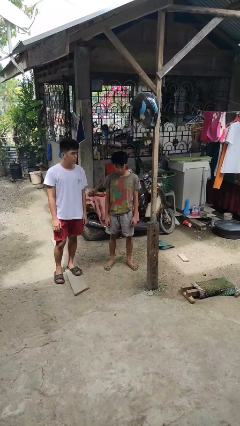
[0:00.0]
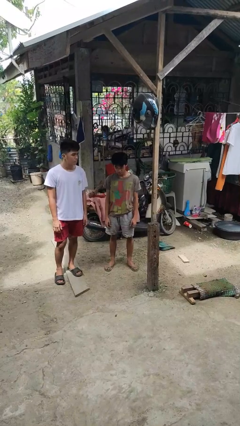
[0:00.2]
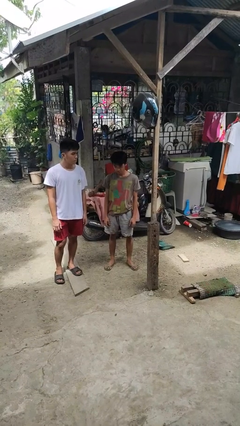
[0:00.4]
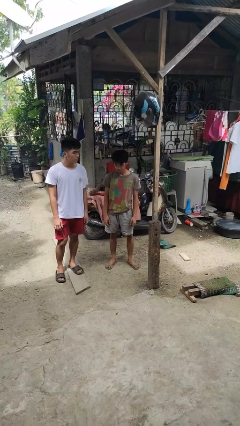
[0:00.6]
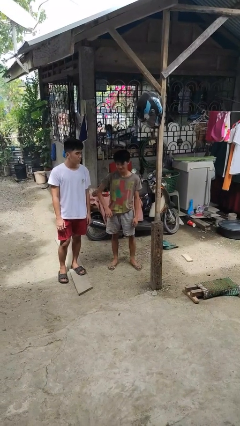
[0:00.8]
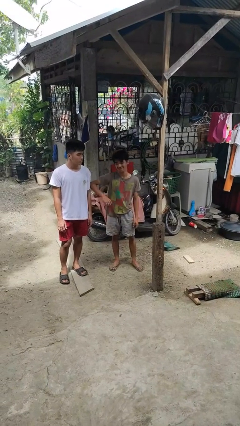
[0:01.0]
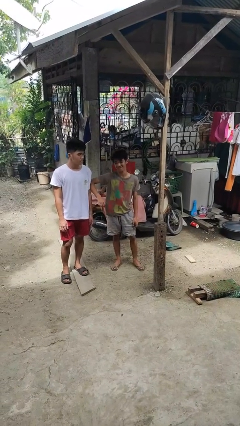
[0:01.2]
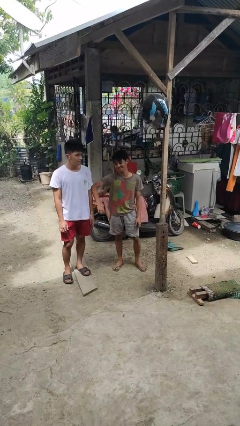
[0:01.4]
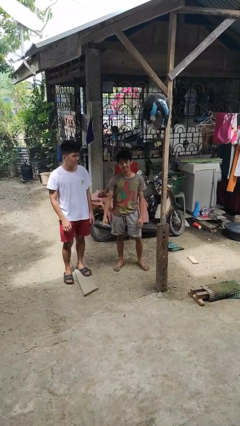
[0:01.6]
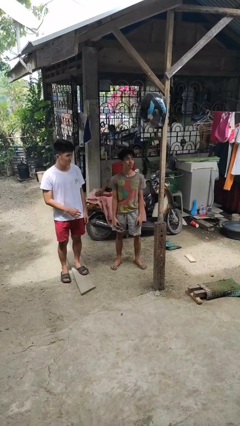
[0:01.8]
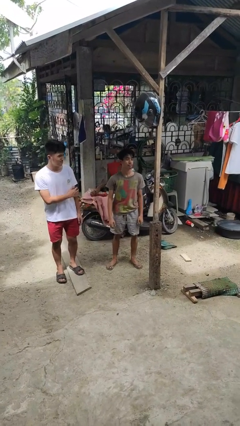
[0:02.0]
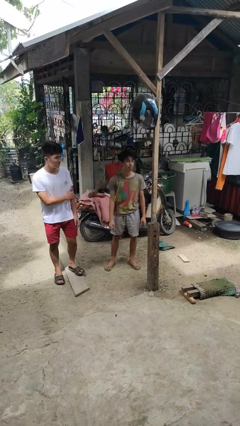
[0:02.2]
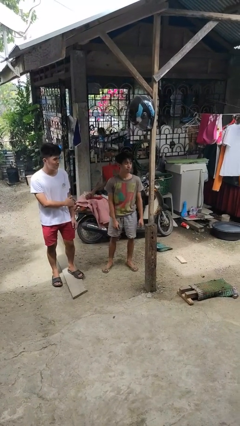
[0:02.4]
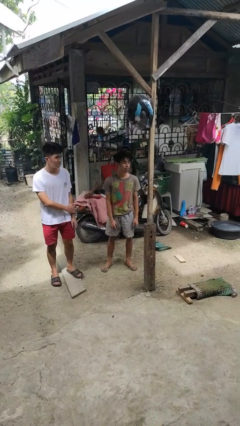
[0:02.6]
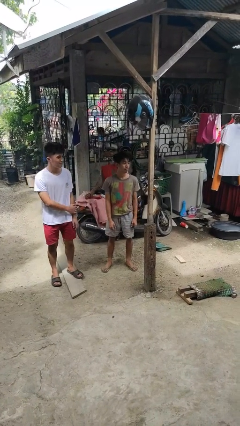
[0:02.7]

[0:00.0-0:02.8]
person nudges person with elbow

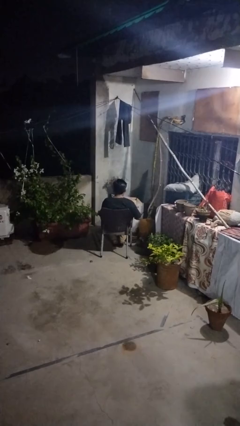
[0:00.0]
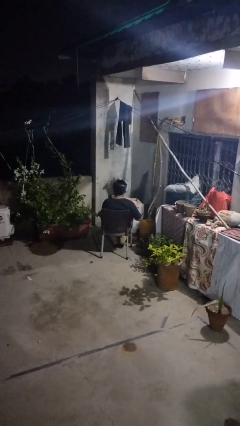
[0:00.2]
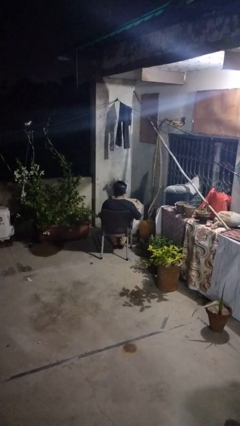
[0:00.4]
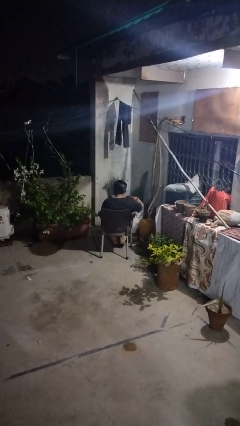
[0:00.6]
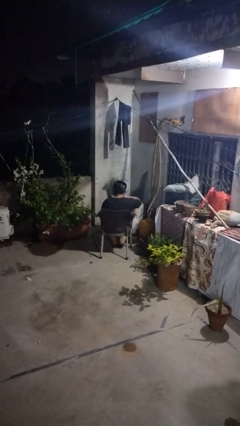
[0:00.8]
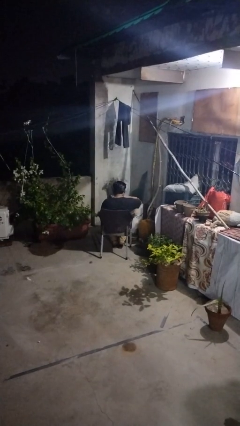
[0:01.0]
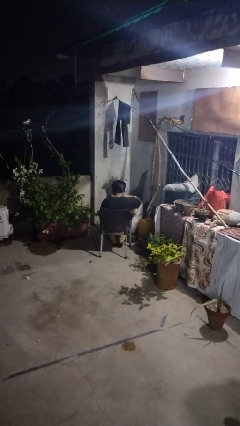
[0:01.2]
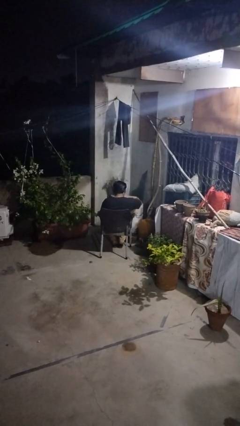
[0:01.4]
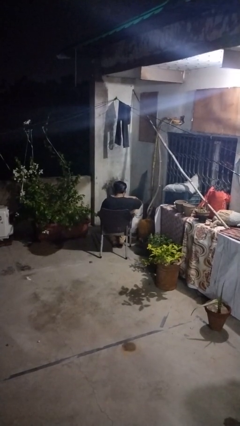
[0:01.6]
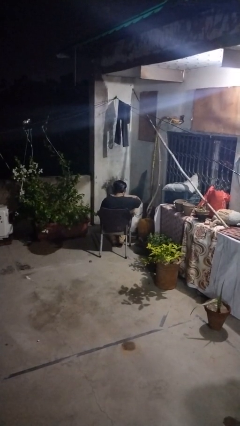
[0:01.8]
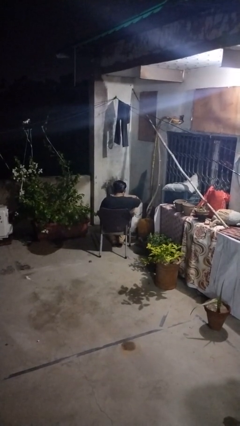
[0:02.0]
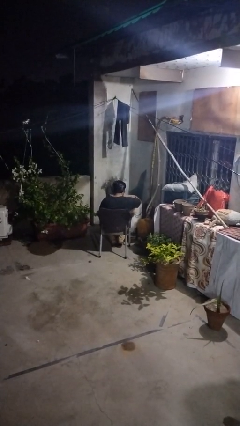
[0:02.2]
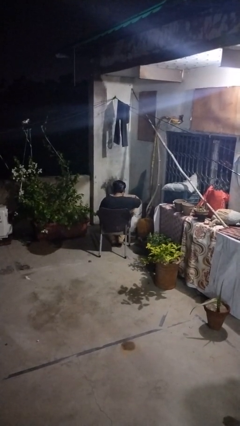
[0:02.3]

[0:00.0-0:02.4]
person searches in box

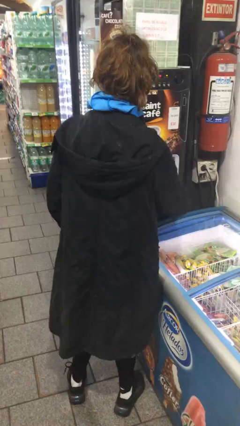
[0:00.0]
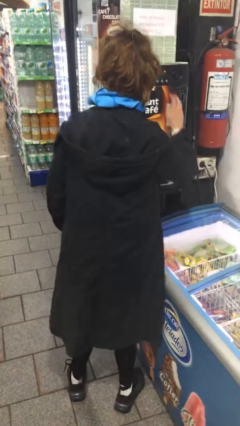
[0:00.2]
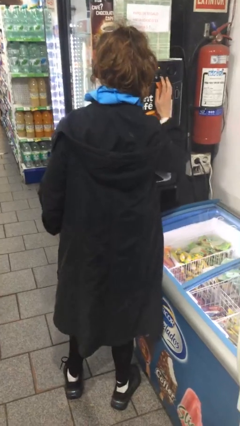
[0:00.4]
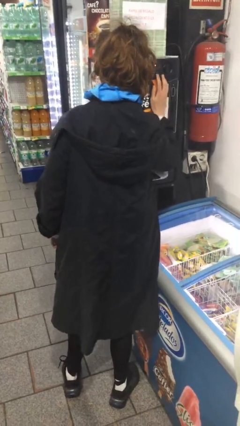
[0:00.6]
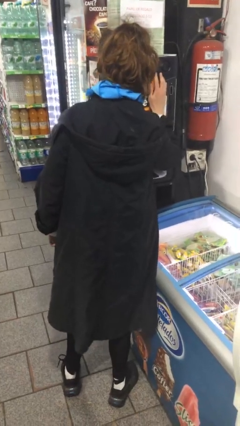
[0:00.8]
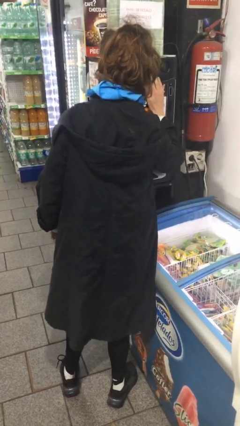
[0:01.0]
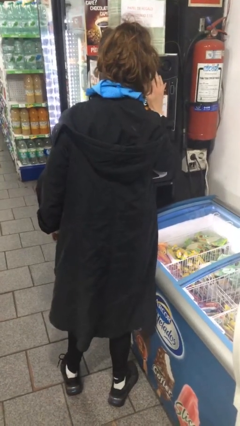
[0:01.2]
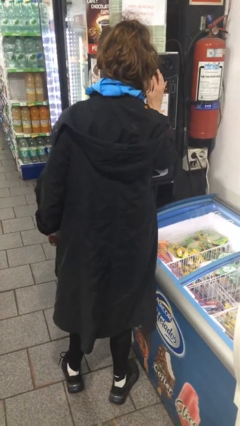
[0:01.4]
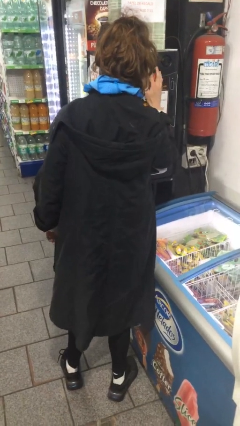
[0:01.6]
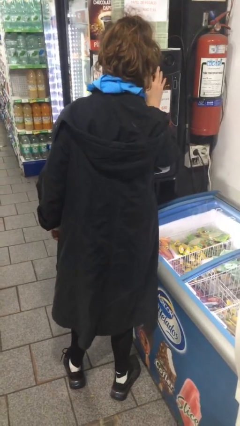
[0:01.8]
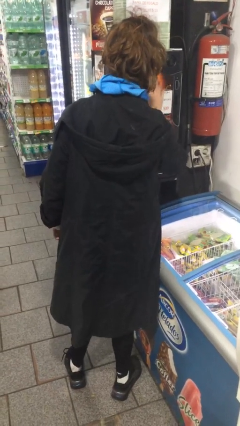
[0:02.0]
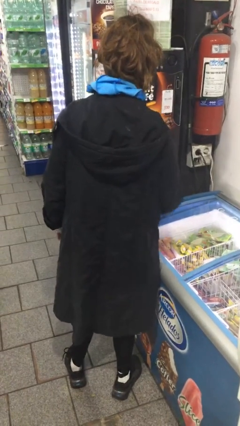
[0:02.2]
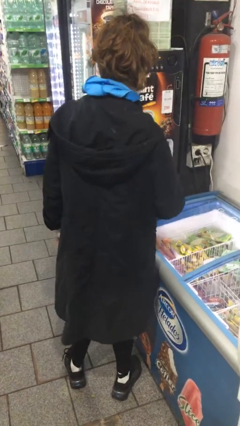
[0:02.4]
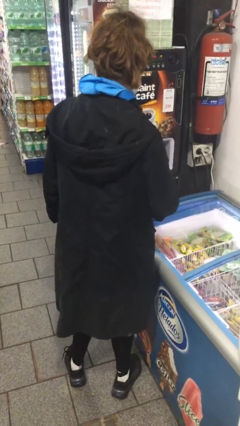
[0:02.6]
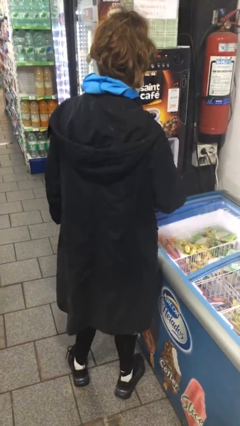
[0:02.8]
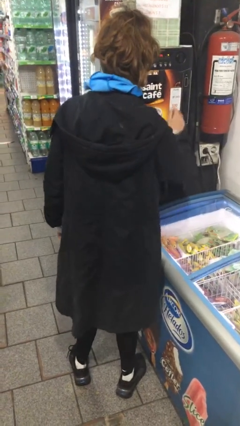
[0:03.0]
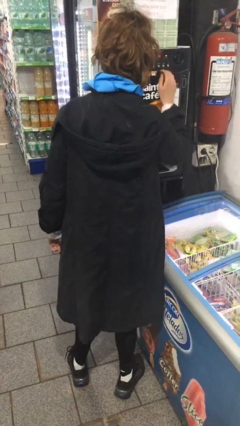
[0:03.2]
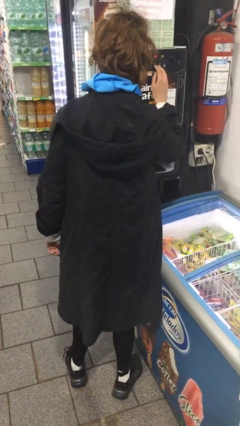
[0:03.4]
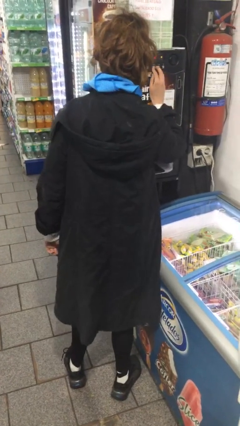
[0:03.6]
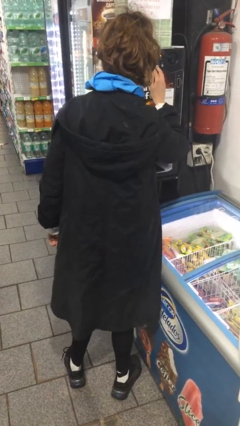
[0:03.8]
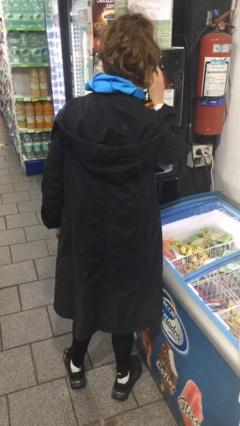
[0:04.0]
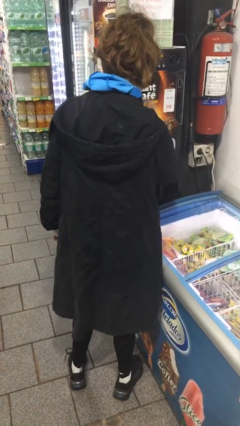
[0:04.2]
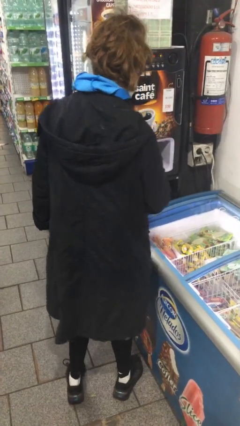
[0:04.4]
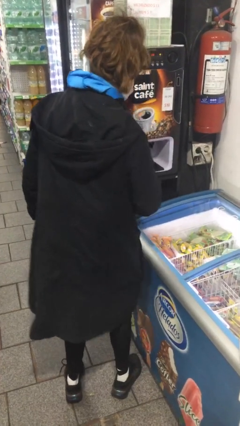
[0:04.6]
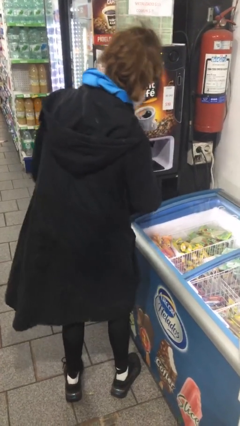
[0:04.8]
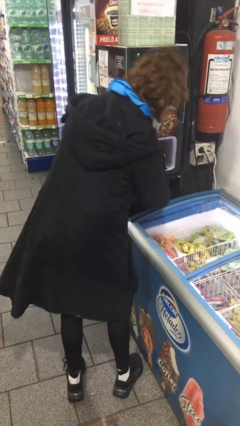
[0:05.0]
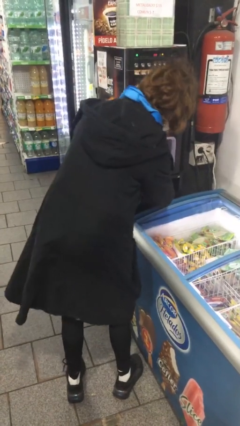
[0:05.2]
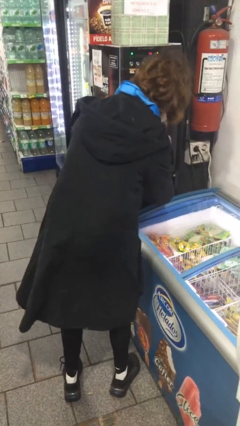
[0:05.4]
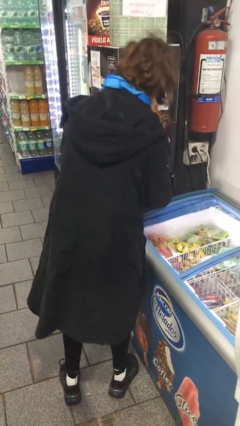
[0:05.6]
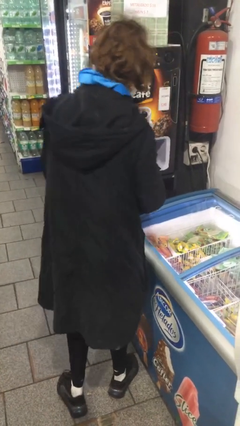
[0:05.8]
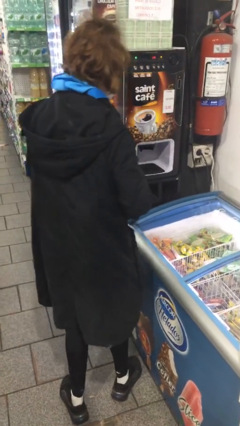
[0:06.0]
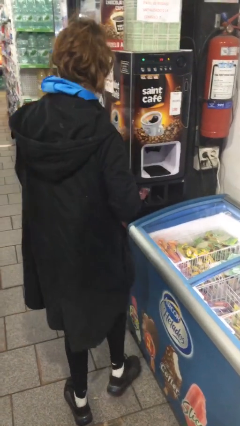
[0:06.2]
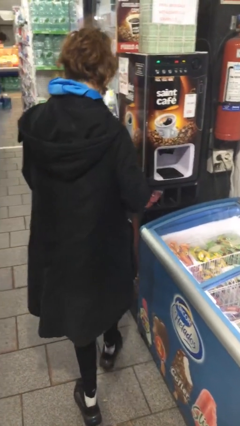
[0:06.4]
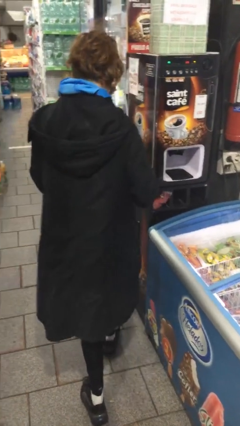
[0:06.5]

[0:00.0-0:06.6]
person purchases from machine

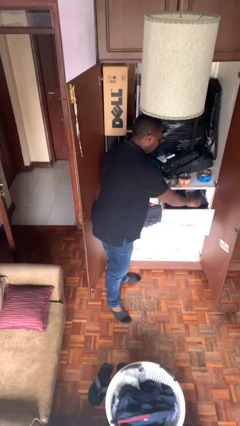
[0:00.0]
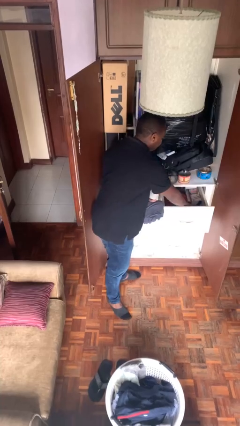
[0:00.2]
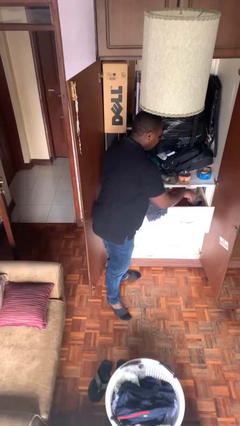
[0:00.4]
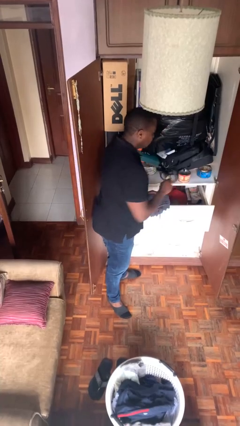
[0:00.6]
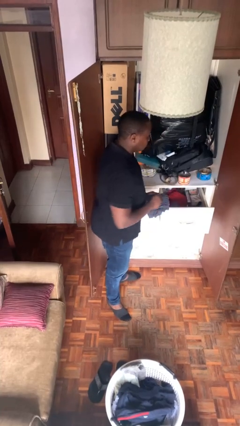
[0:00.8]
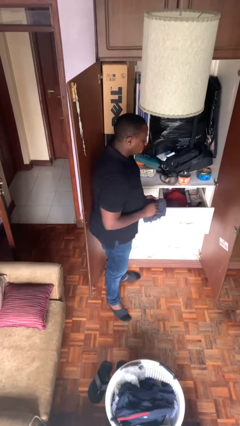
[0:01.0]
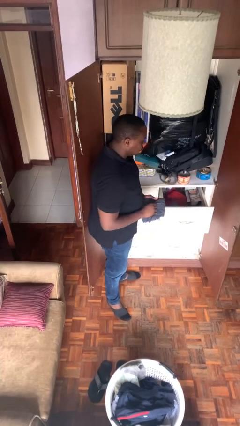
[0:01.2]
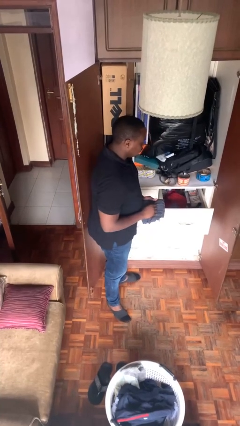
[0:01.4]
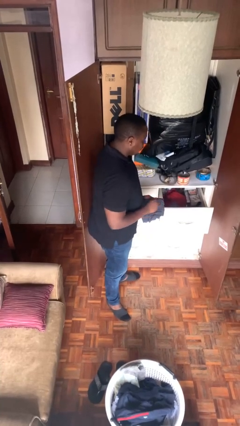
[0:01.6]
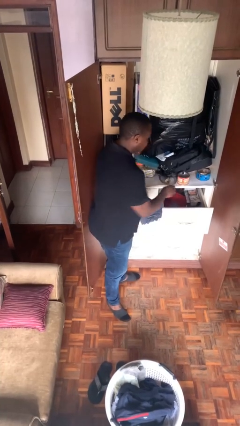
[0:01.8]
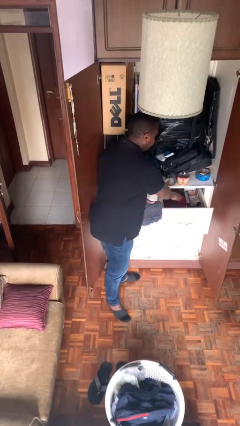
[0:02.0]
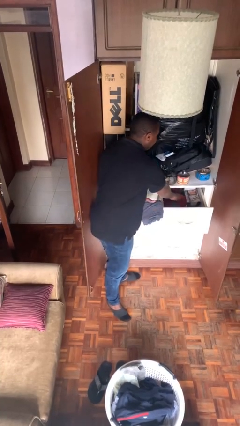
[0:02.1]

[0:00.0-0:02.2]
person puts clothes into dresser

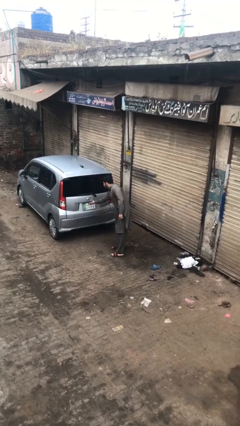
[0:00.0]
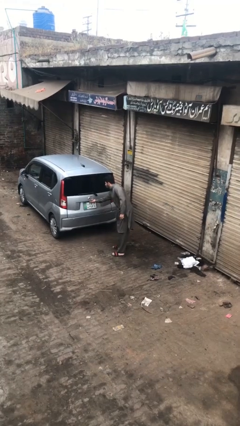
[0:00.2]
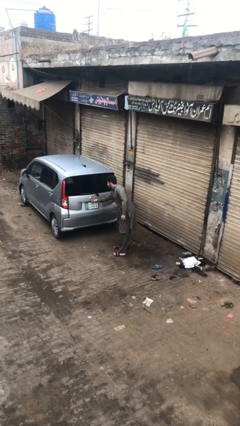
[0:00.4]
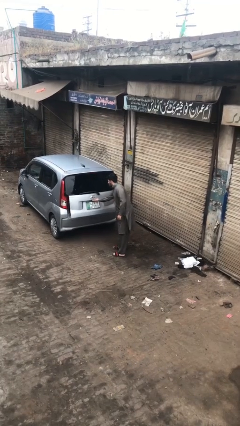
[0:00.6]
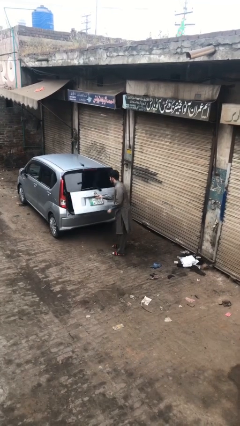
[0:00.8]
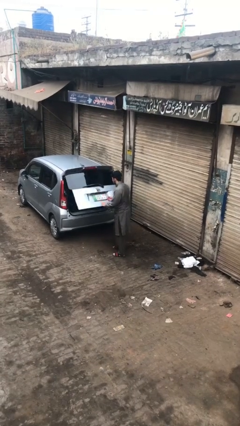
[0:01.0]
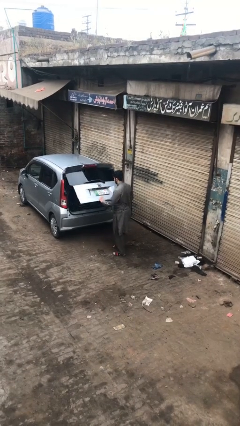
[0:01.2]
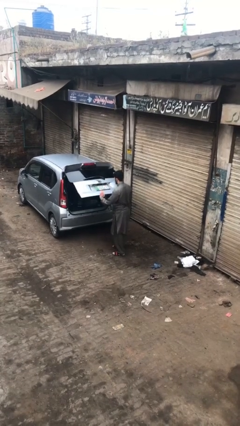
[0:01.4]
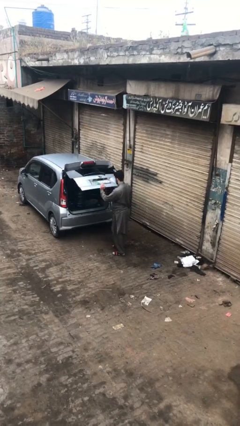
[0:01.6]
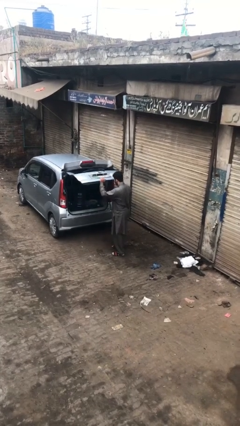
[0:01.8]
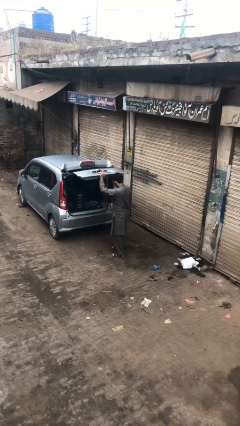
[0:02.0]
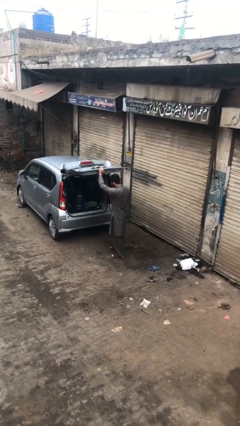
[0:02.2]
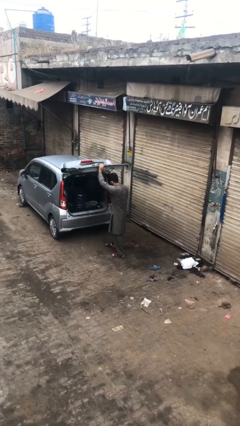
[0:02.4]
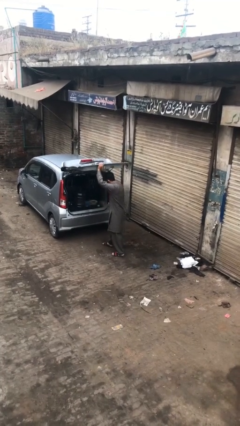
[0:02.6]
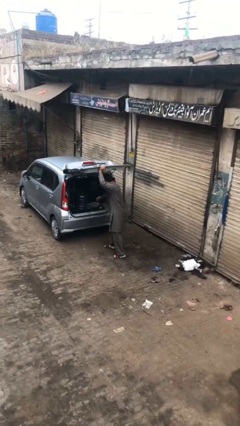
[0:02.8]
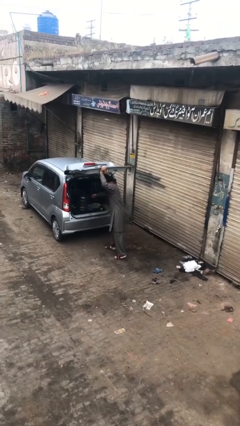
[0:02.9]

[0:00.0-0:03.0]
person opens car trunk

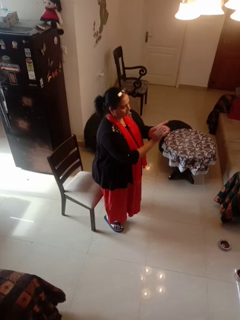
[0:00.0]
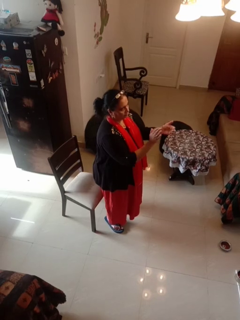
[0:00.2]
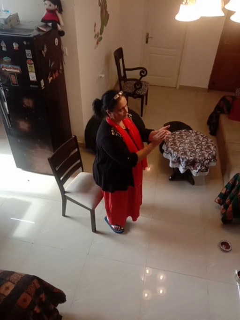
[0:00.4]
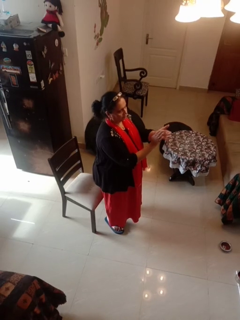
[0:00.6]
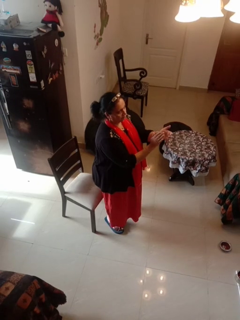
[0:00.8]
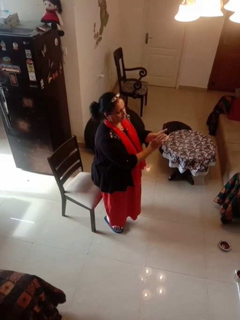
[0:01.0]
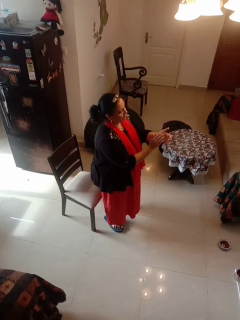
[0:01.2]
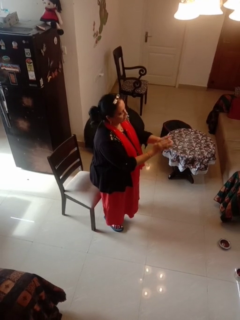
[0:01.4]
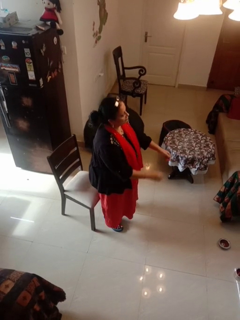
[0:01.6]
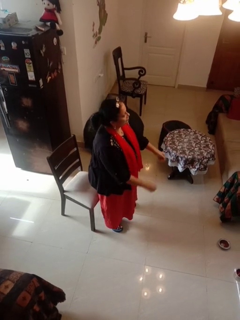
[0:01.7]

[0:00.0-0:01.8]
person claps hands
